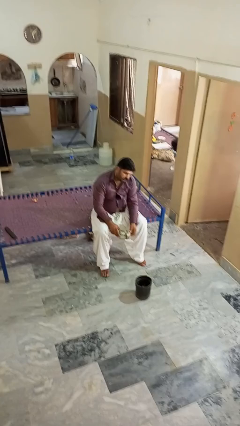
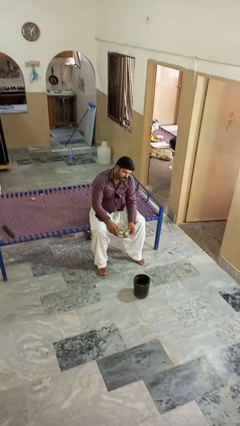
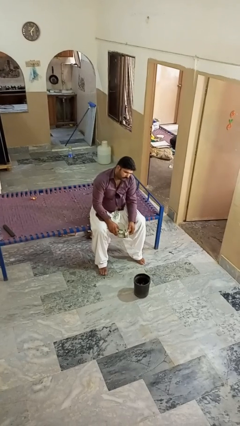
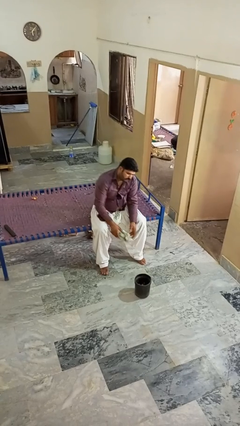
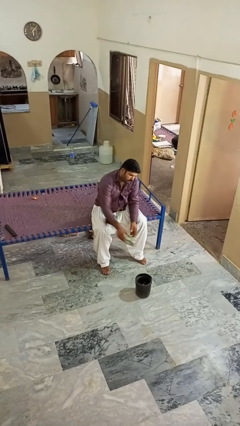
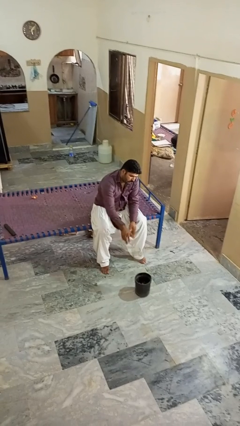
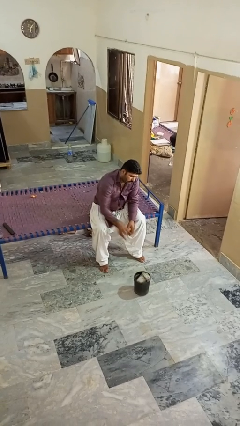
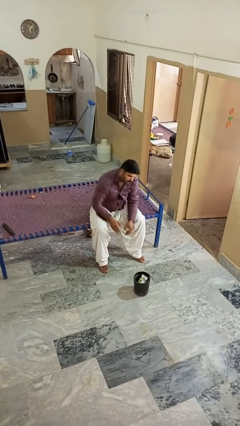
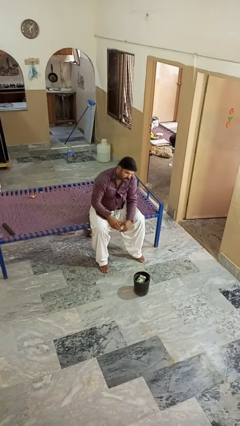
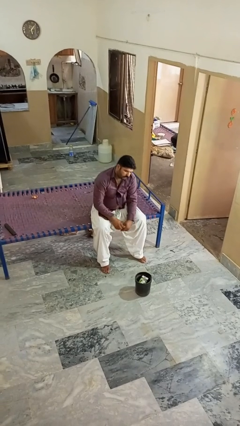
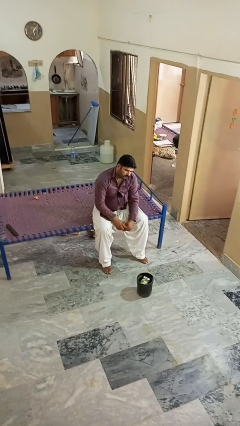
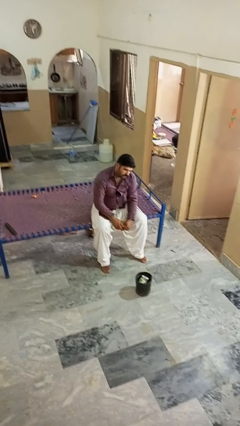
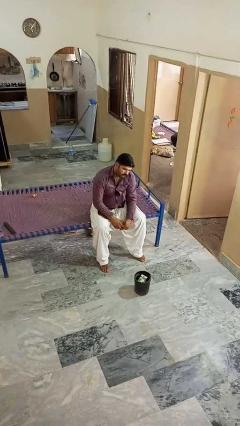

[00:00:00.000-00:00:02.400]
person puts object into basket

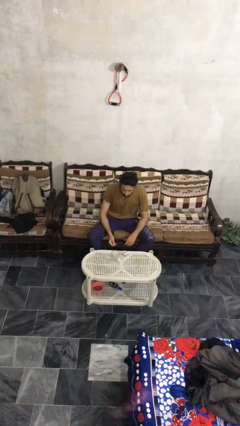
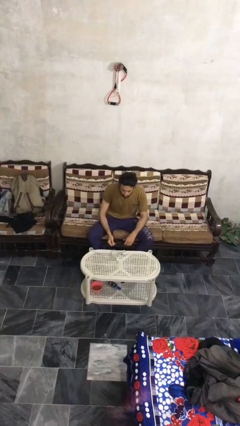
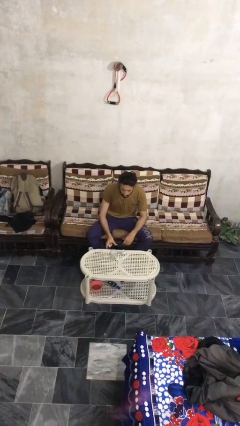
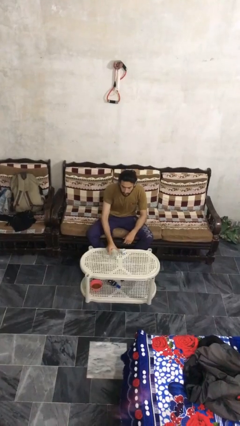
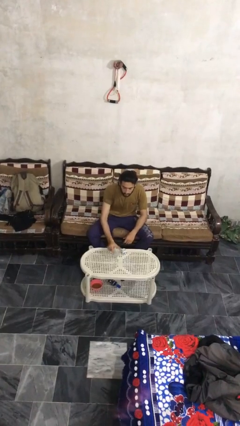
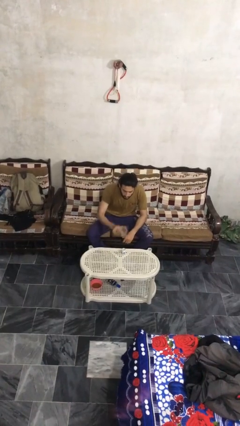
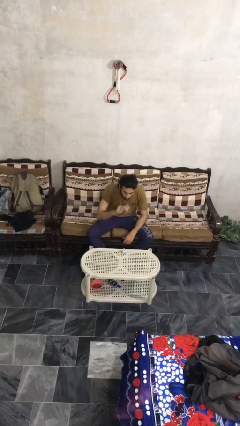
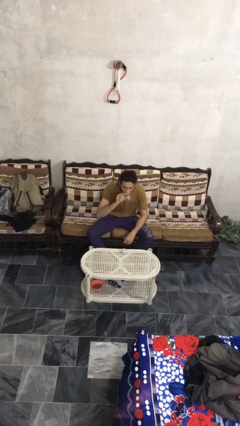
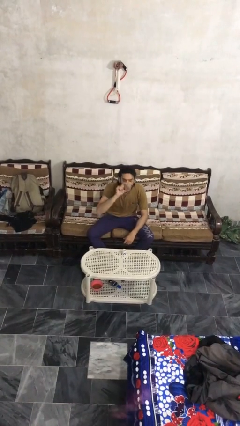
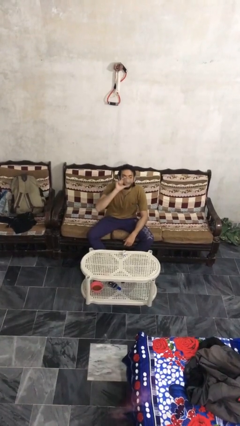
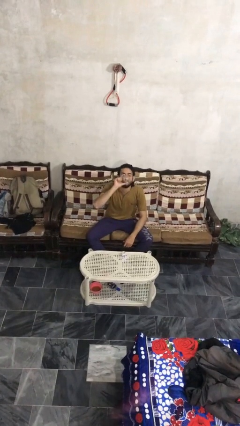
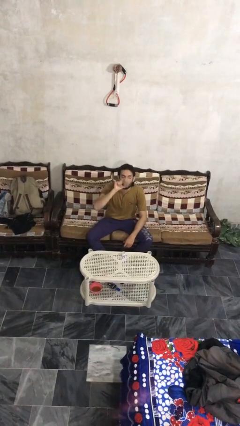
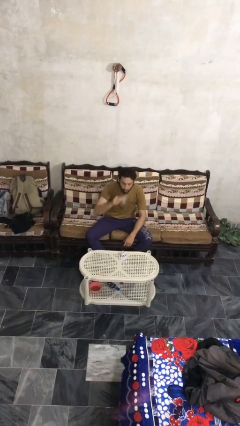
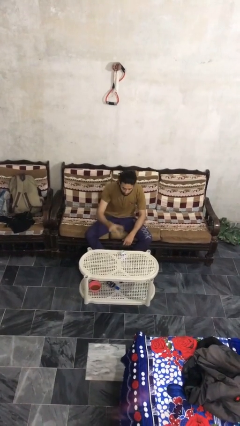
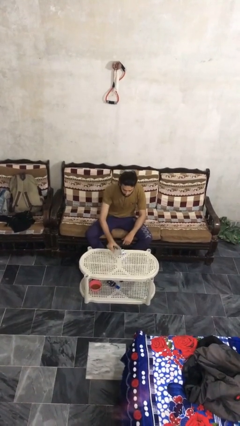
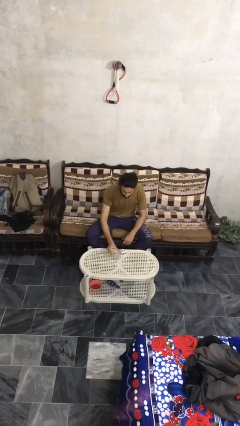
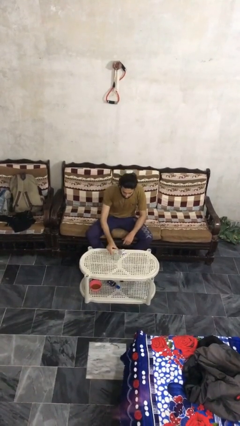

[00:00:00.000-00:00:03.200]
person drinks from cup

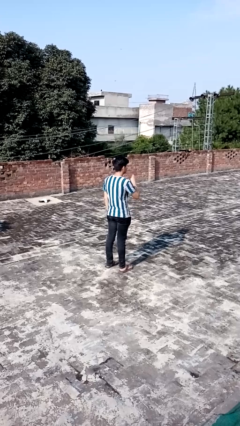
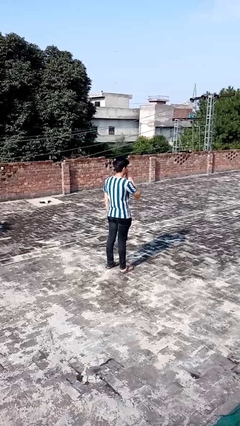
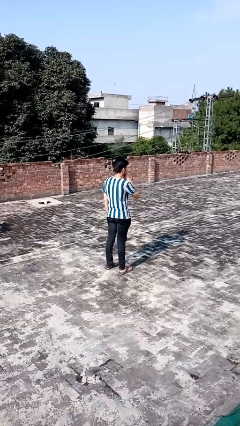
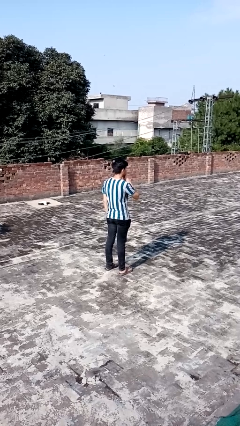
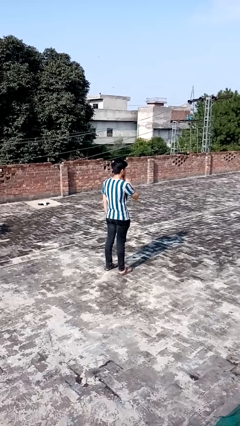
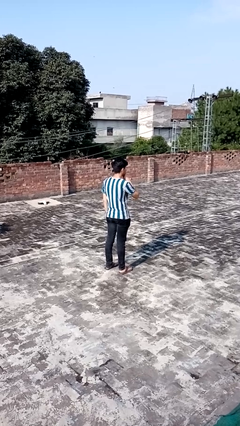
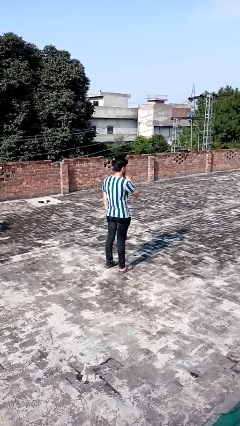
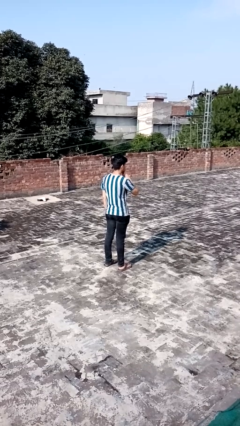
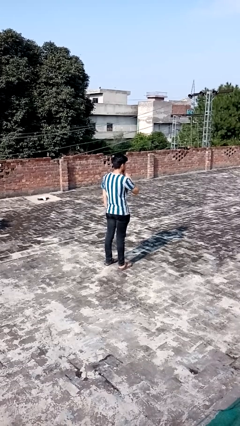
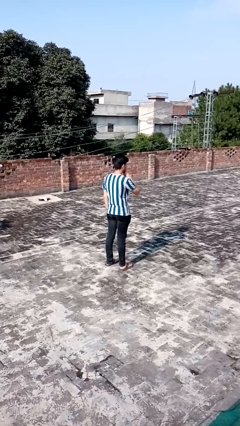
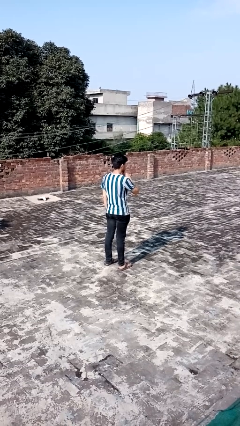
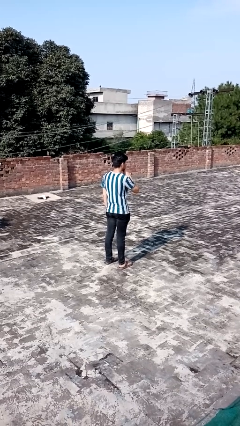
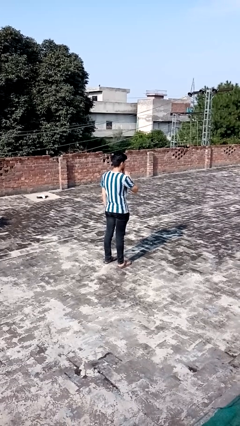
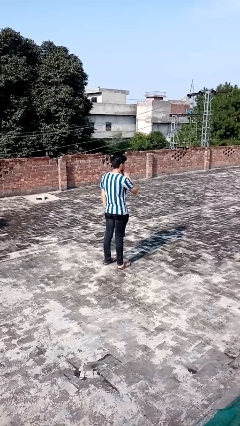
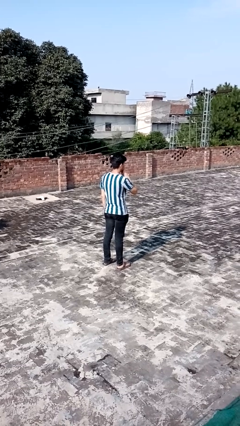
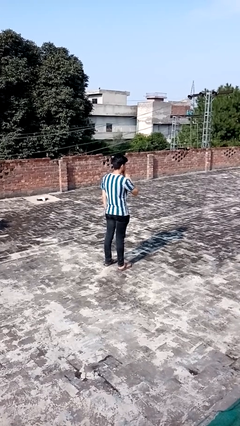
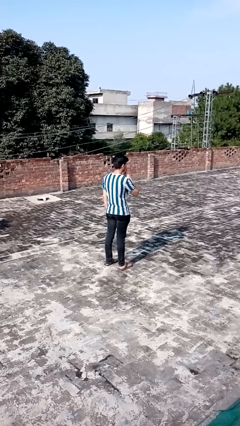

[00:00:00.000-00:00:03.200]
person gestures be quiet

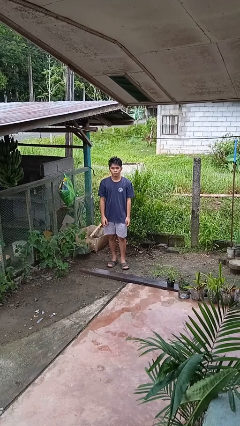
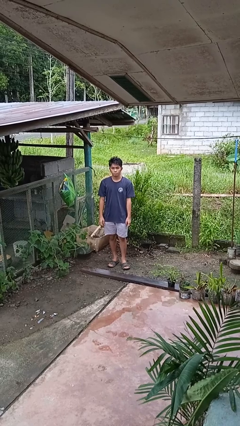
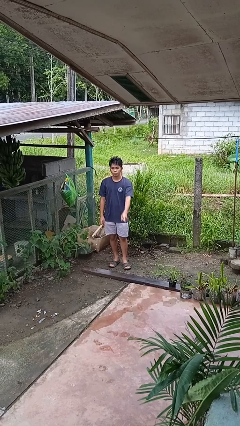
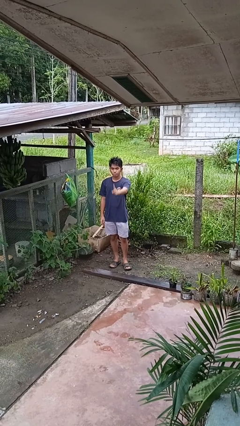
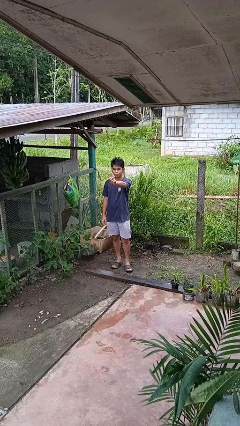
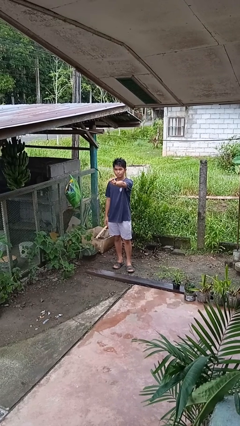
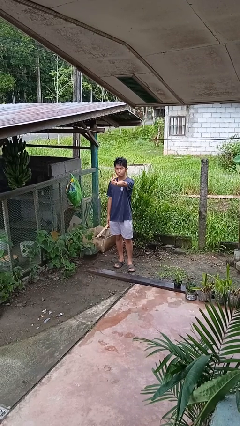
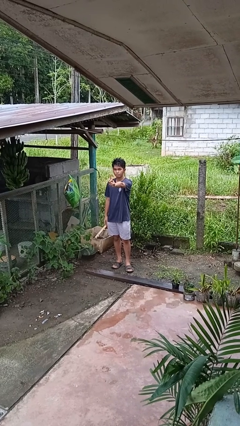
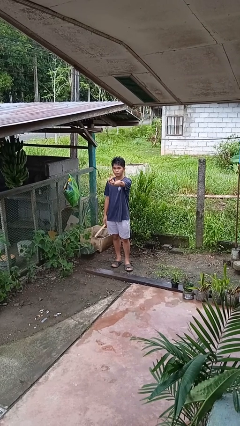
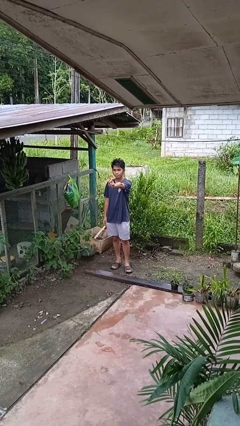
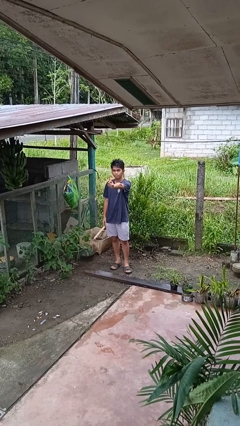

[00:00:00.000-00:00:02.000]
person gestures number one

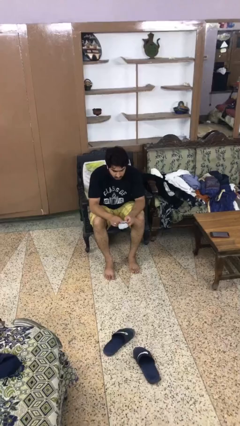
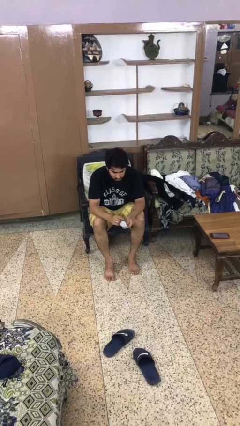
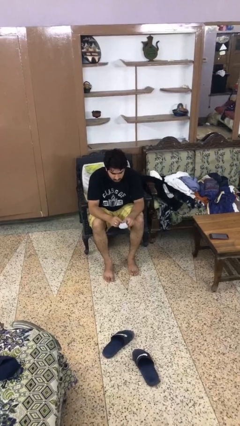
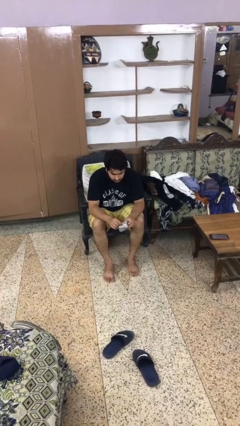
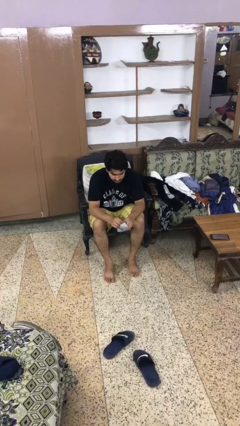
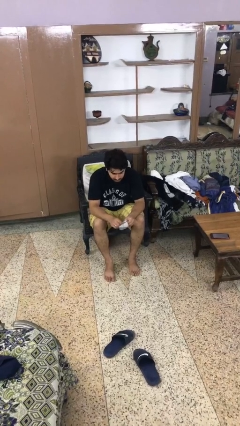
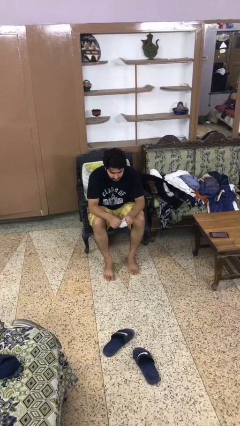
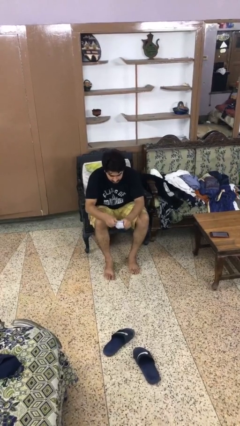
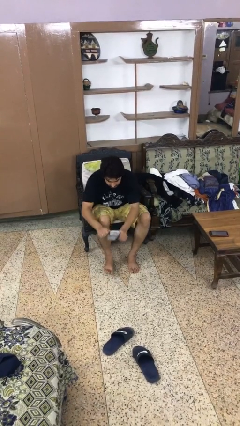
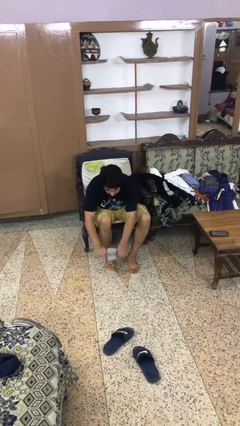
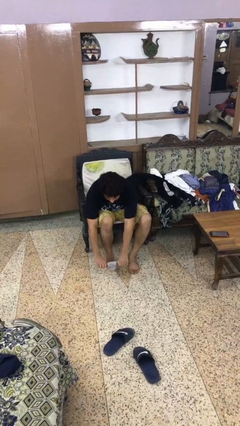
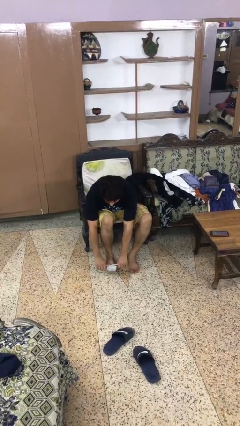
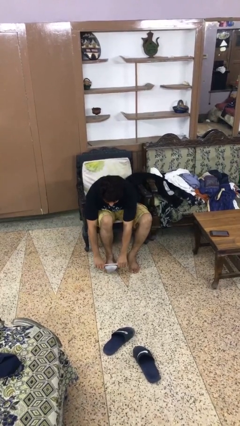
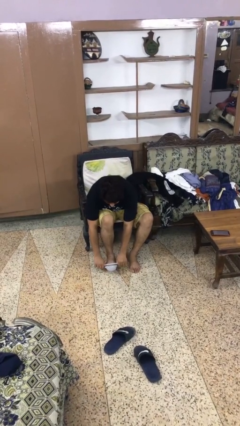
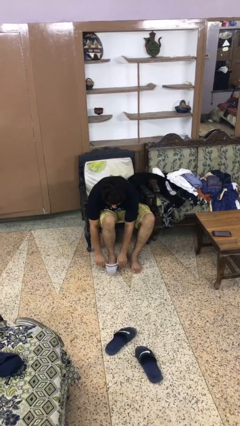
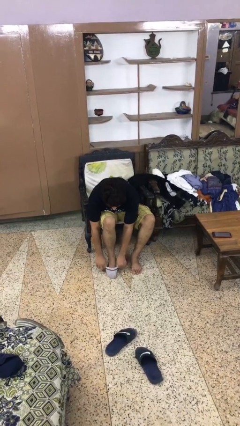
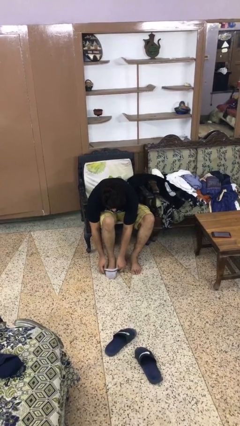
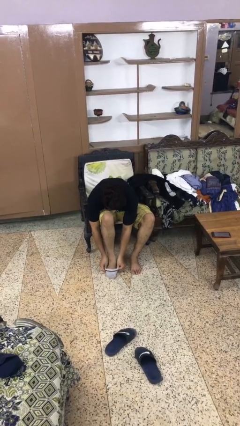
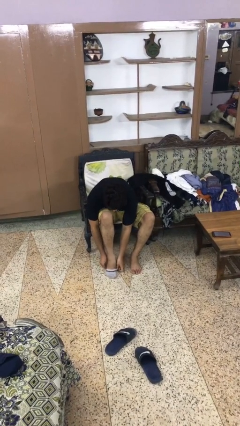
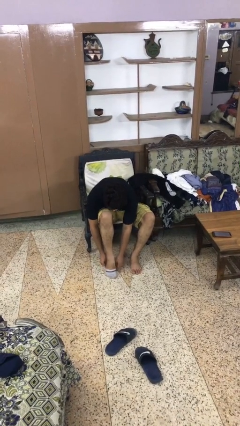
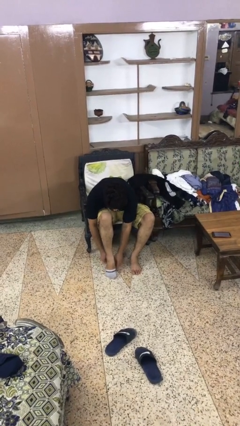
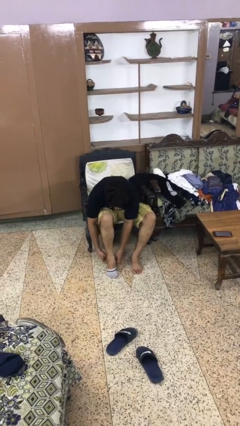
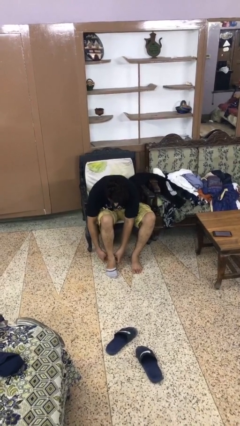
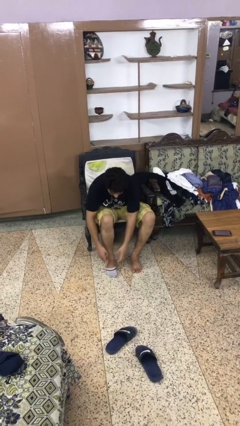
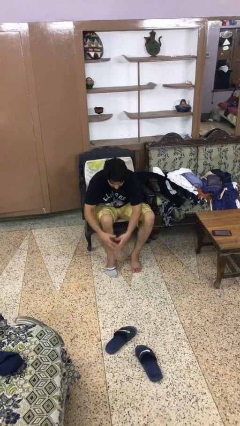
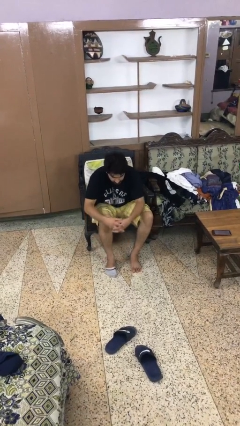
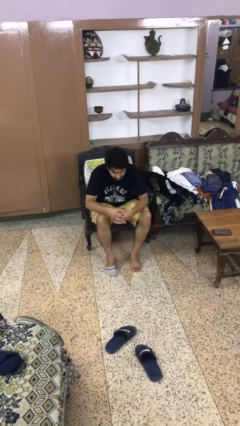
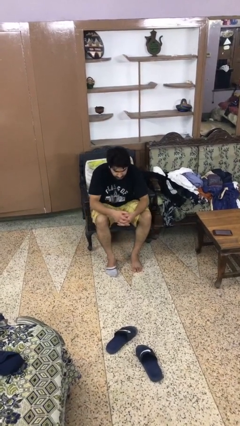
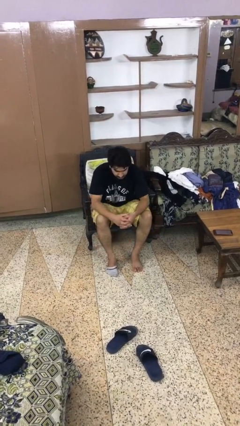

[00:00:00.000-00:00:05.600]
person puts on socks

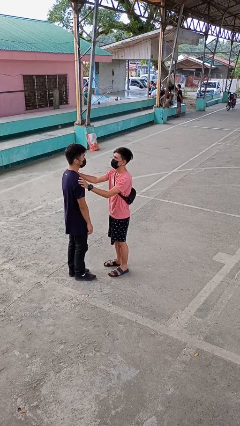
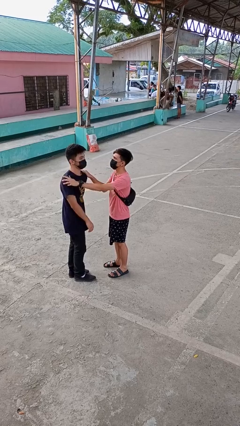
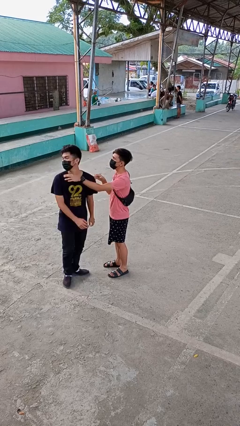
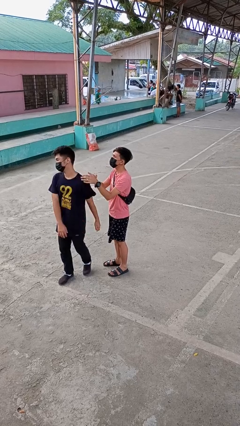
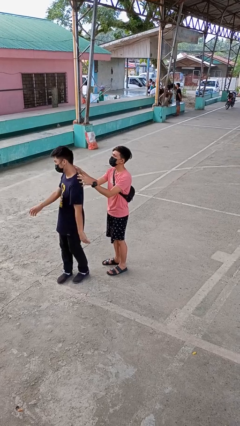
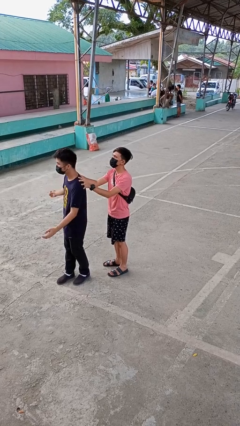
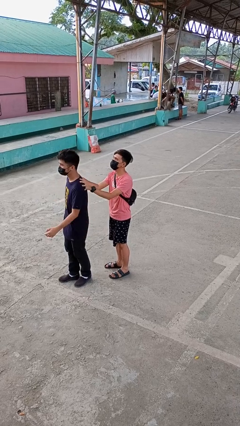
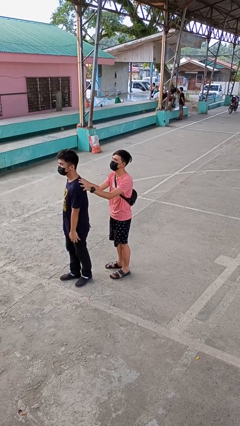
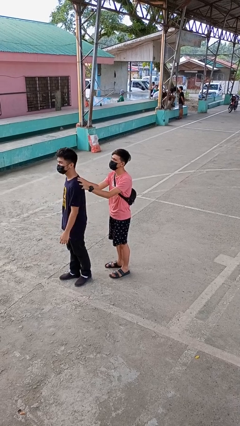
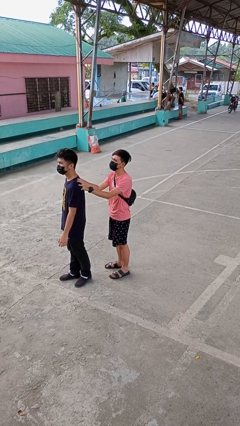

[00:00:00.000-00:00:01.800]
person spins person around
